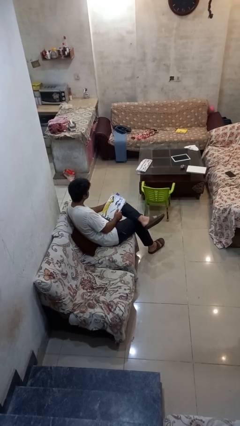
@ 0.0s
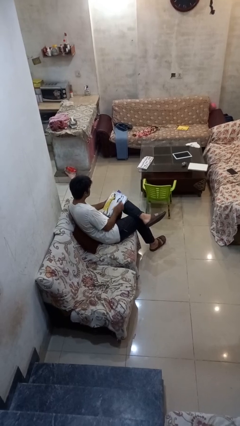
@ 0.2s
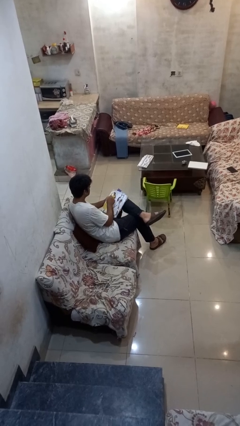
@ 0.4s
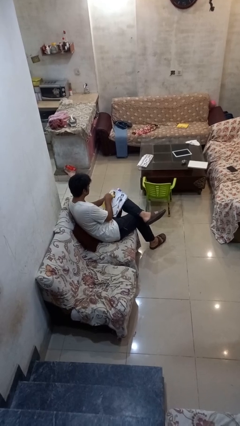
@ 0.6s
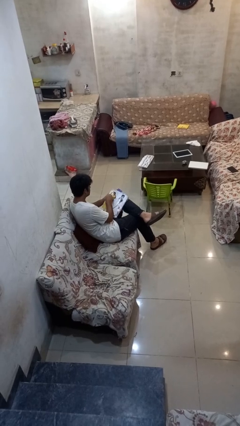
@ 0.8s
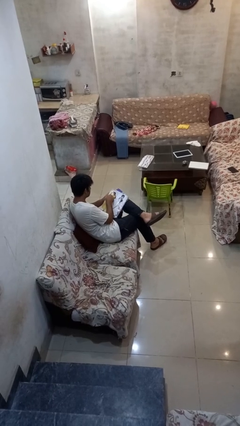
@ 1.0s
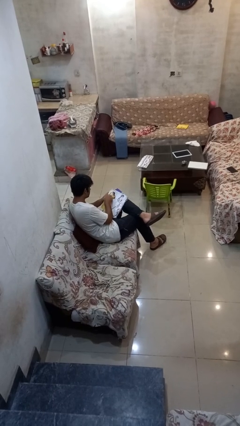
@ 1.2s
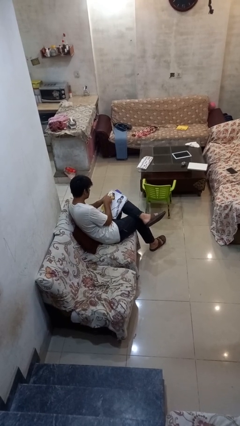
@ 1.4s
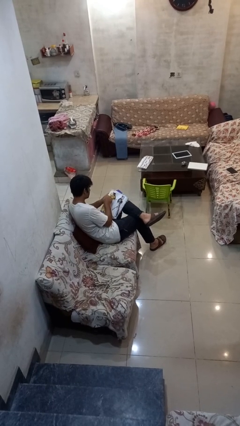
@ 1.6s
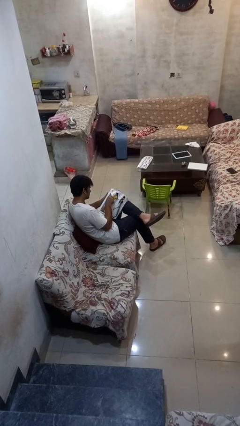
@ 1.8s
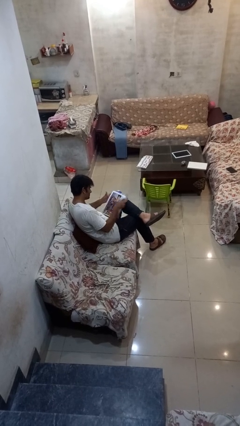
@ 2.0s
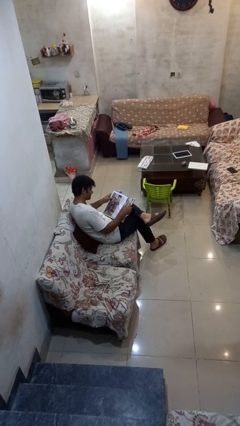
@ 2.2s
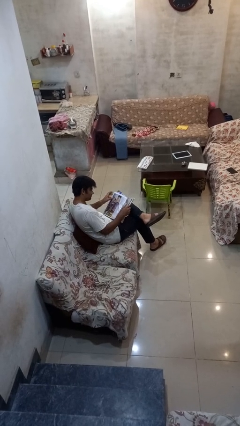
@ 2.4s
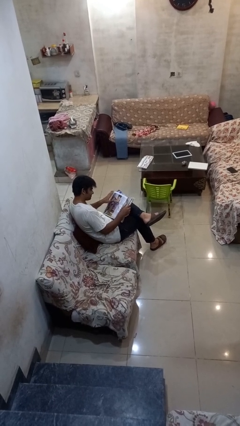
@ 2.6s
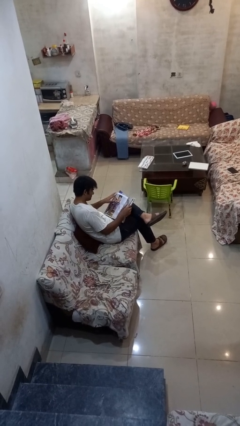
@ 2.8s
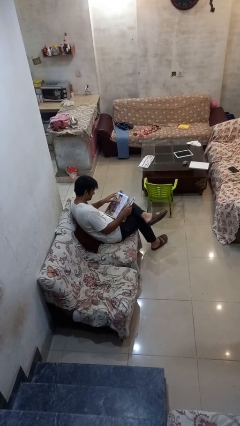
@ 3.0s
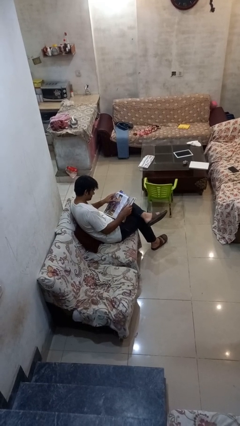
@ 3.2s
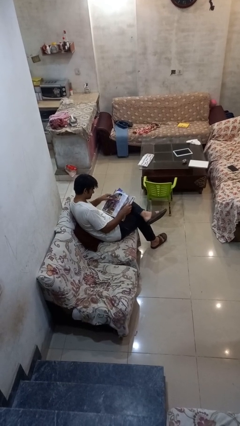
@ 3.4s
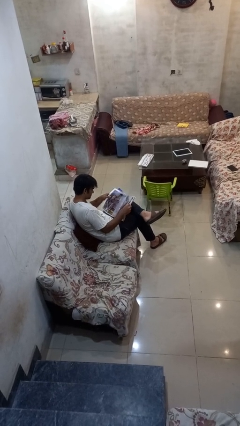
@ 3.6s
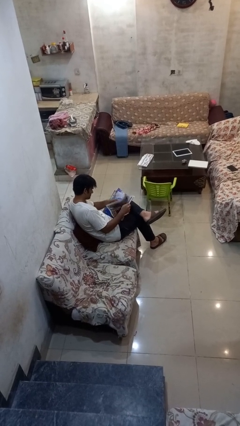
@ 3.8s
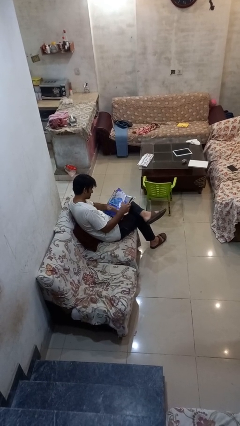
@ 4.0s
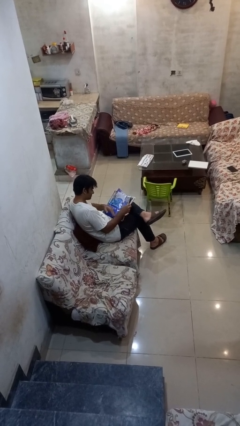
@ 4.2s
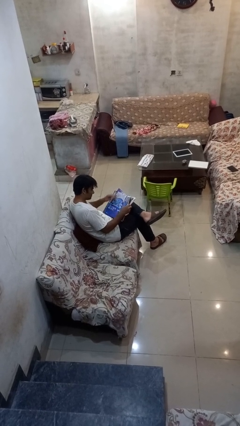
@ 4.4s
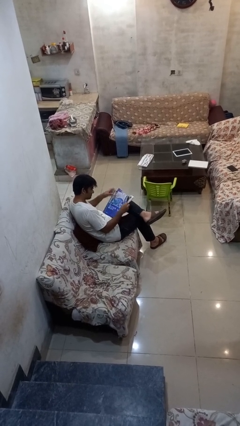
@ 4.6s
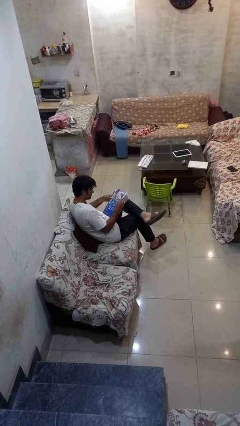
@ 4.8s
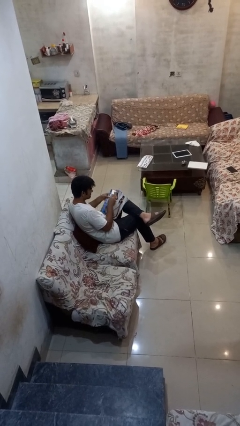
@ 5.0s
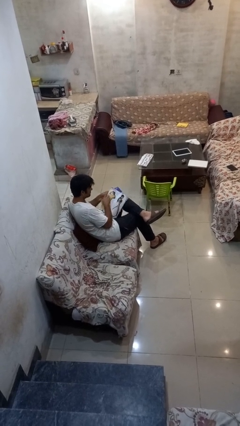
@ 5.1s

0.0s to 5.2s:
person reads magazine

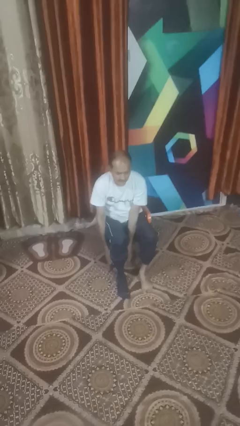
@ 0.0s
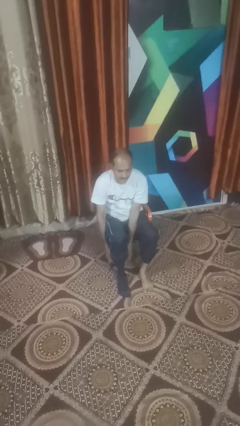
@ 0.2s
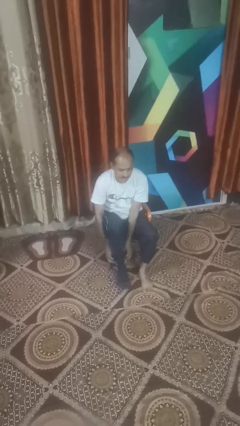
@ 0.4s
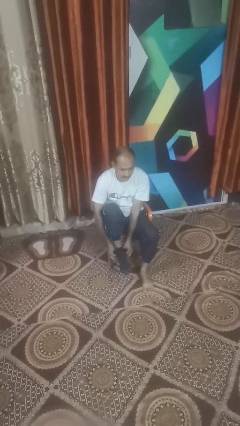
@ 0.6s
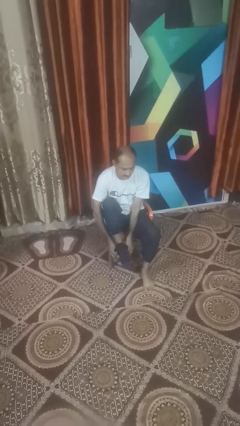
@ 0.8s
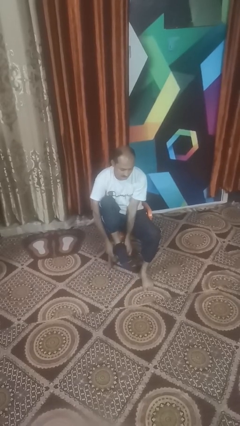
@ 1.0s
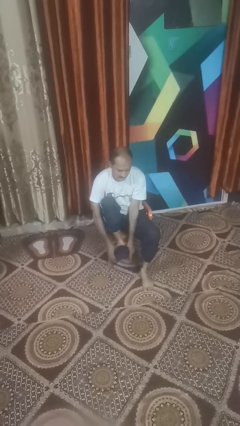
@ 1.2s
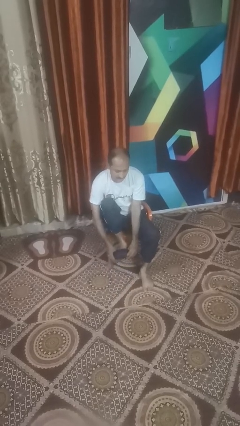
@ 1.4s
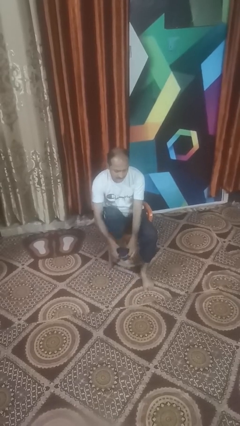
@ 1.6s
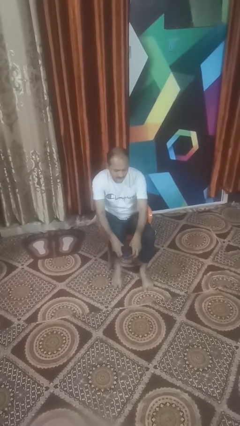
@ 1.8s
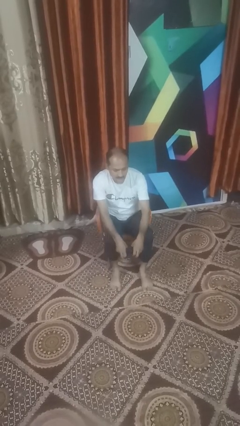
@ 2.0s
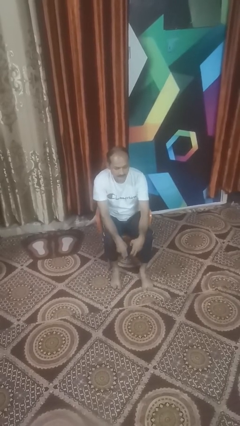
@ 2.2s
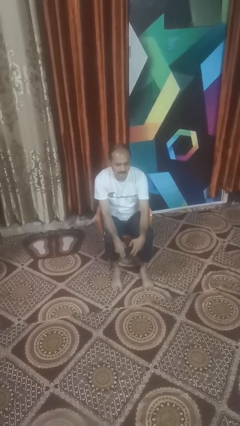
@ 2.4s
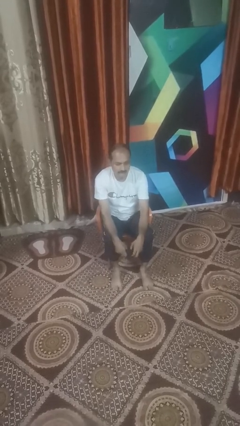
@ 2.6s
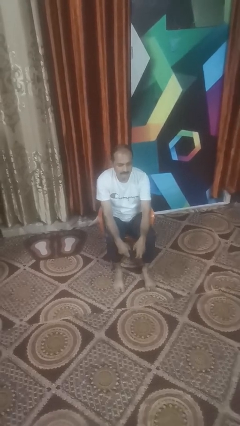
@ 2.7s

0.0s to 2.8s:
person takes off socks

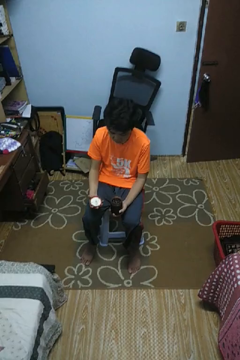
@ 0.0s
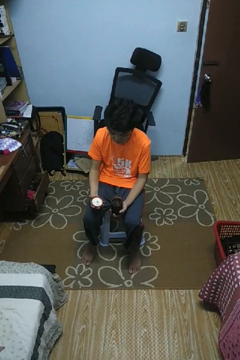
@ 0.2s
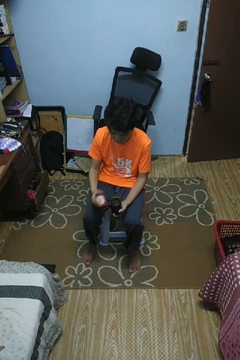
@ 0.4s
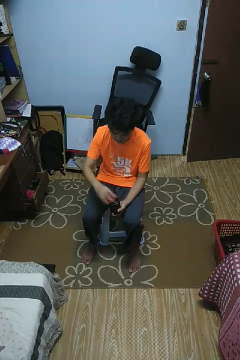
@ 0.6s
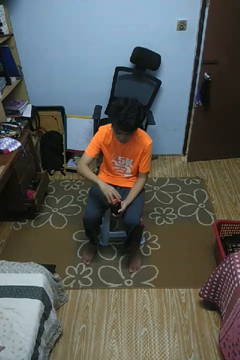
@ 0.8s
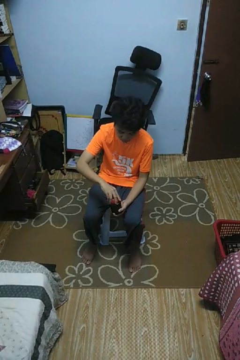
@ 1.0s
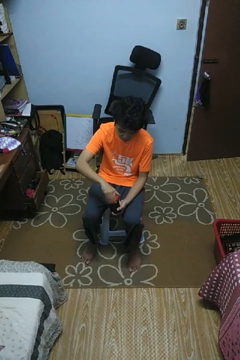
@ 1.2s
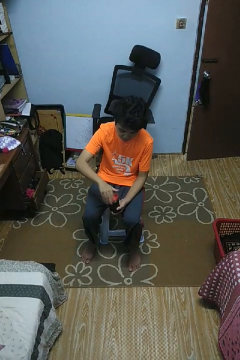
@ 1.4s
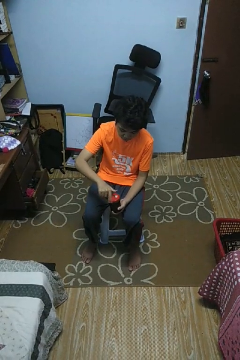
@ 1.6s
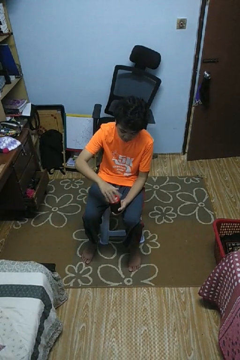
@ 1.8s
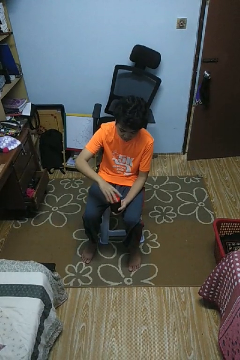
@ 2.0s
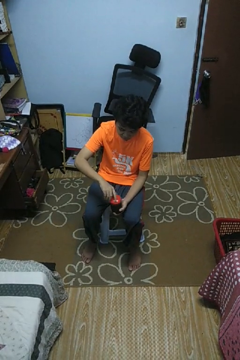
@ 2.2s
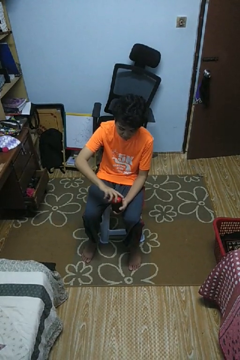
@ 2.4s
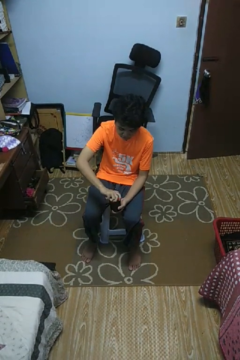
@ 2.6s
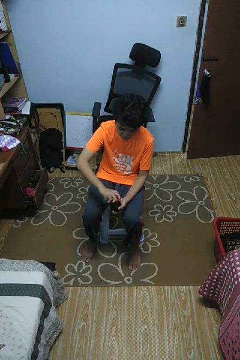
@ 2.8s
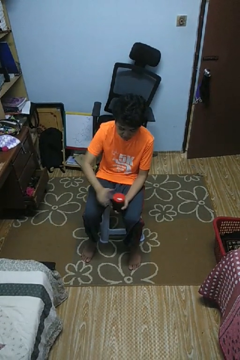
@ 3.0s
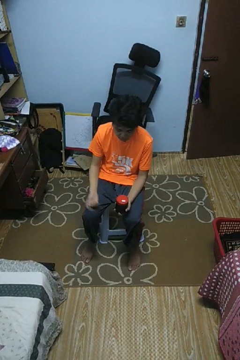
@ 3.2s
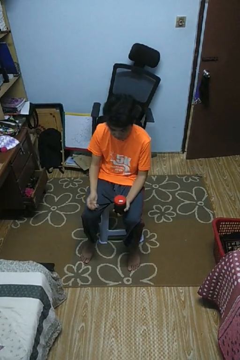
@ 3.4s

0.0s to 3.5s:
person closes jar

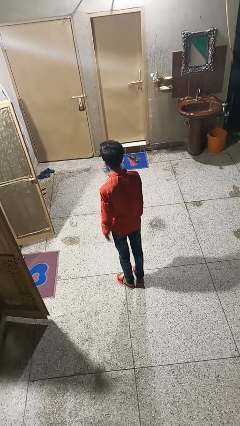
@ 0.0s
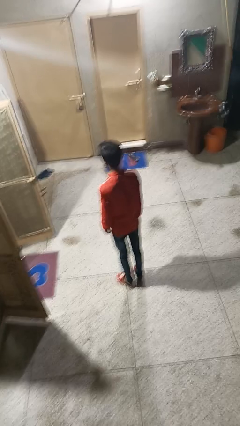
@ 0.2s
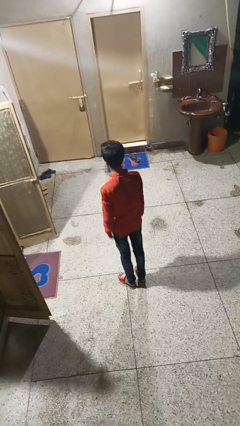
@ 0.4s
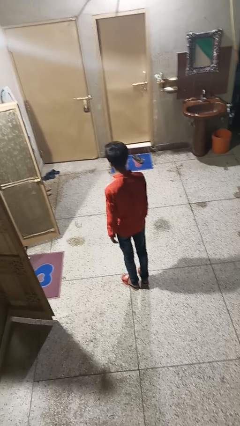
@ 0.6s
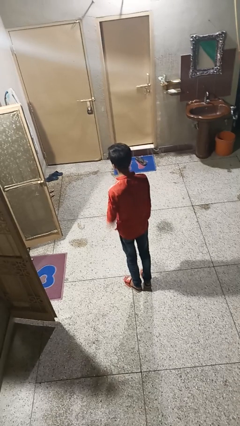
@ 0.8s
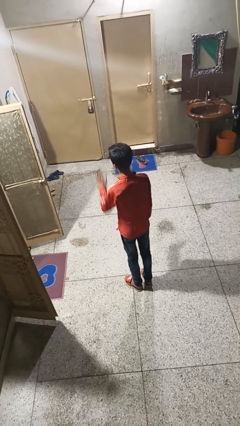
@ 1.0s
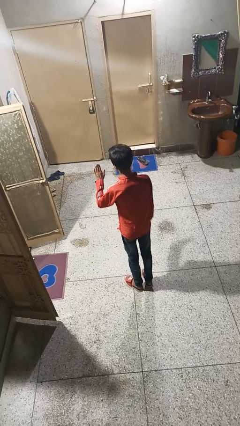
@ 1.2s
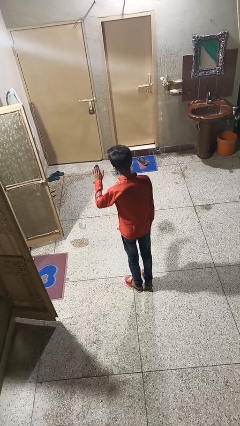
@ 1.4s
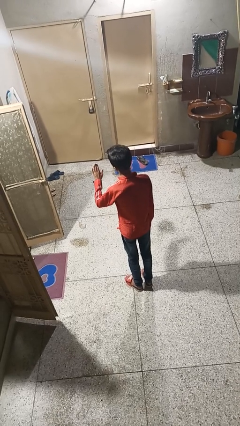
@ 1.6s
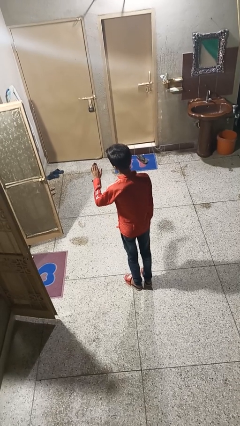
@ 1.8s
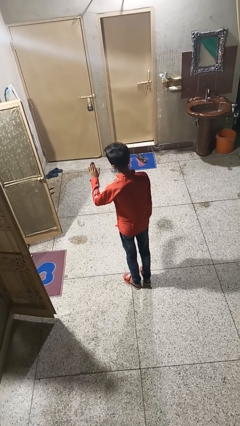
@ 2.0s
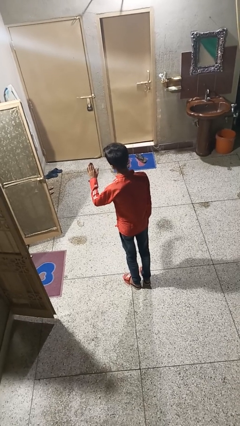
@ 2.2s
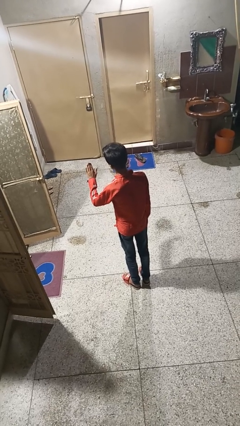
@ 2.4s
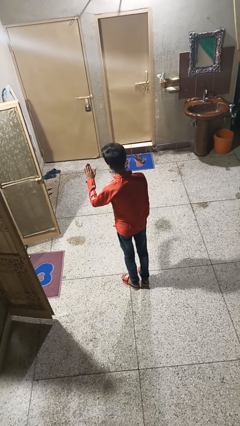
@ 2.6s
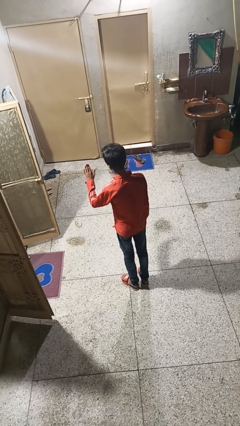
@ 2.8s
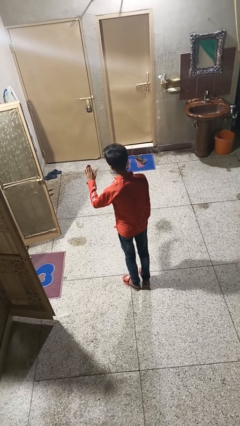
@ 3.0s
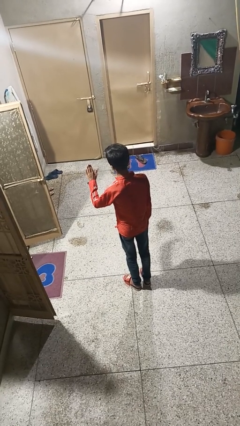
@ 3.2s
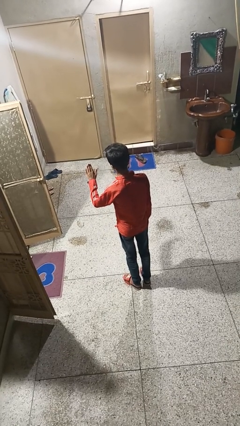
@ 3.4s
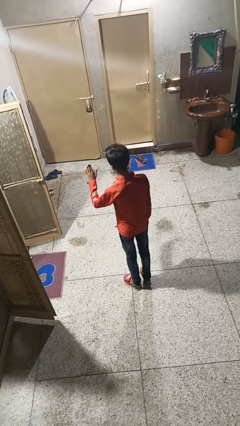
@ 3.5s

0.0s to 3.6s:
person gestures stop

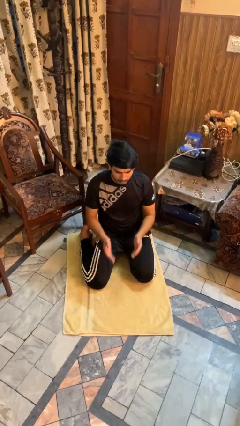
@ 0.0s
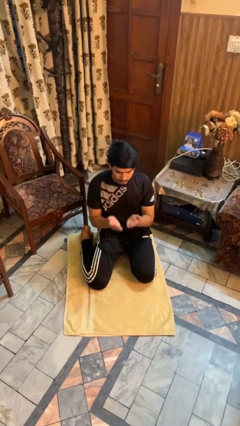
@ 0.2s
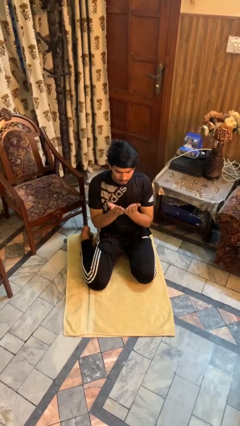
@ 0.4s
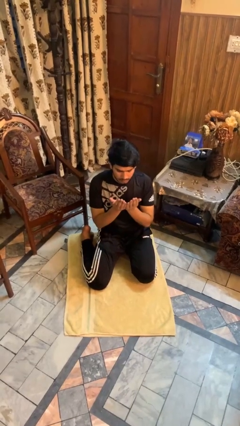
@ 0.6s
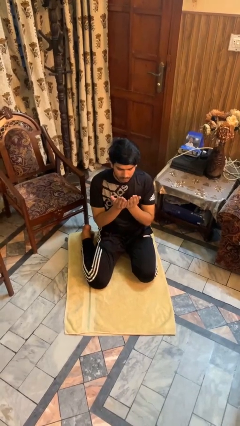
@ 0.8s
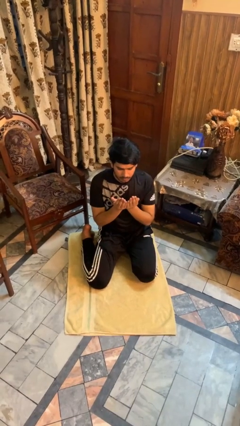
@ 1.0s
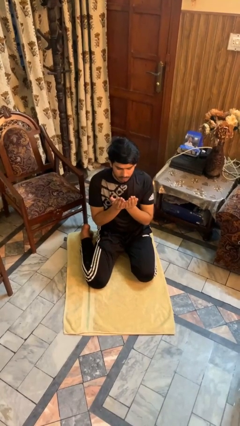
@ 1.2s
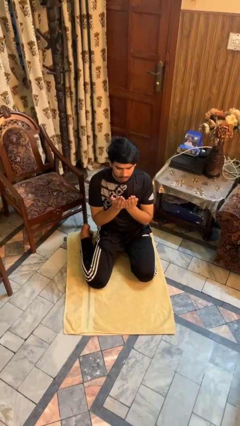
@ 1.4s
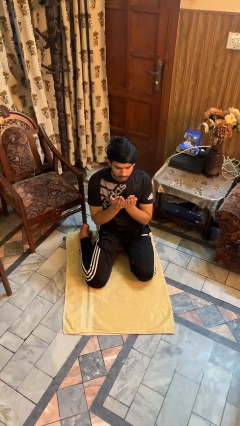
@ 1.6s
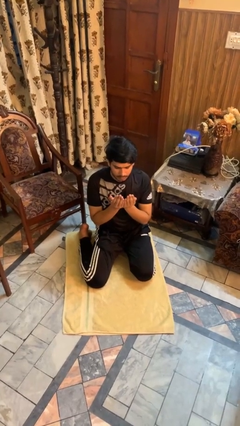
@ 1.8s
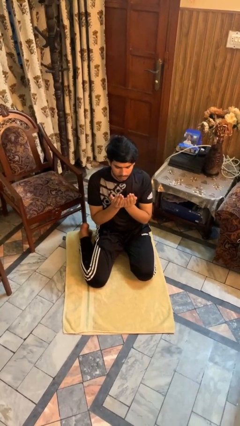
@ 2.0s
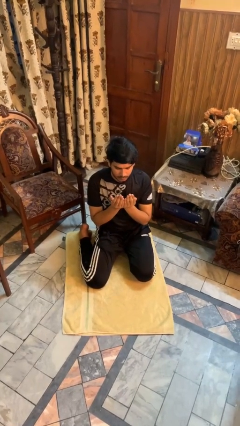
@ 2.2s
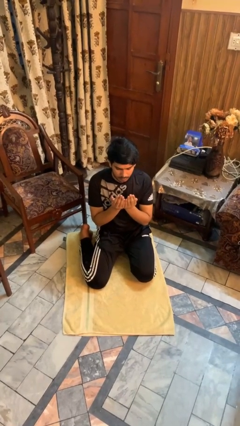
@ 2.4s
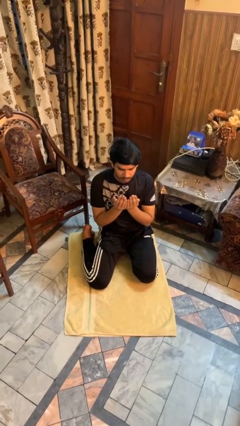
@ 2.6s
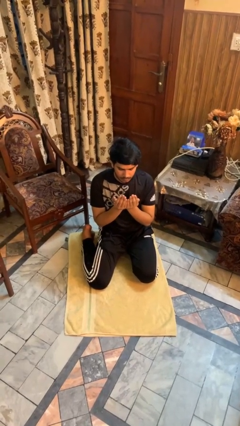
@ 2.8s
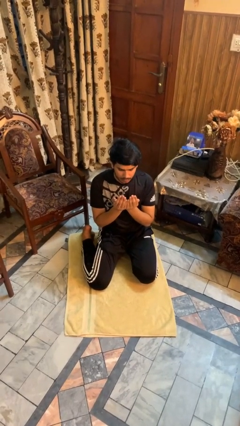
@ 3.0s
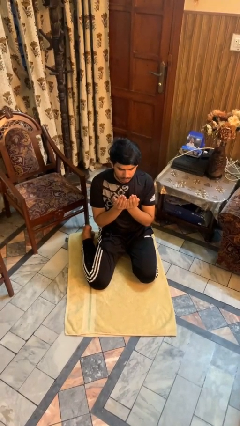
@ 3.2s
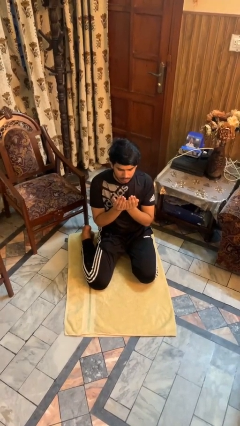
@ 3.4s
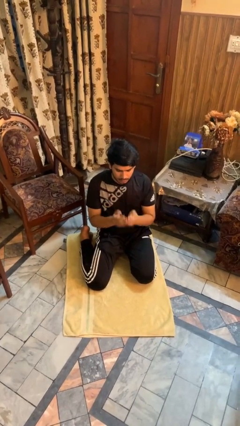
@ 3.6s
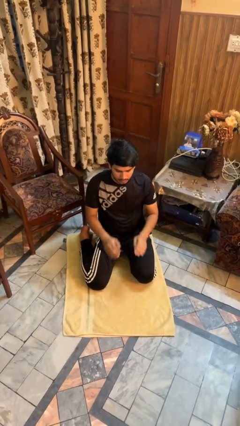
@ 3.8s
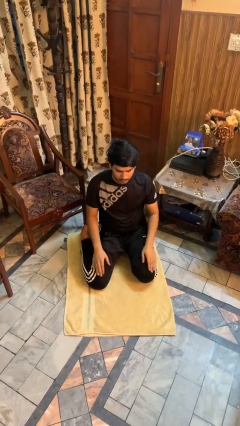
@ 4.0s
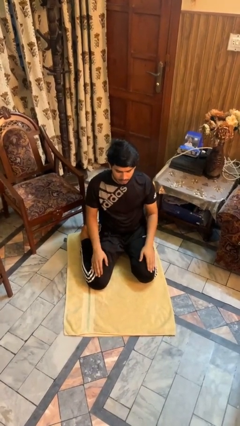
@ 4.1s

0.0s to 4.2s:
person prays
